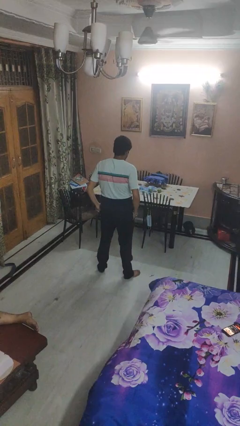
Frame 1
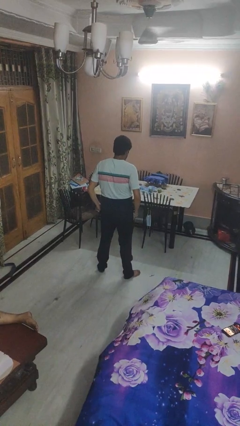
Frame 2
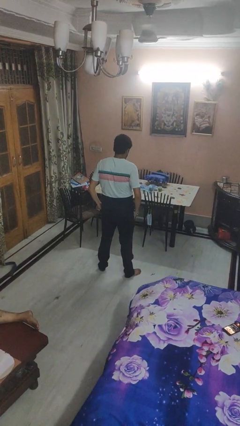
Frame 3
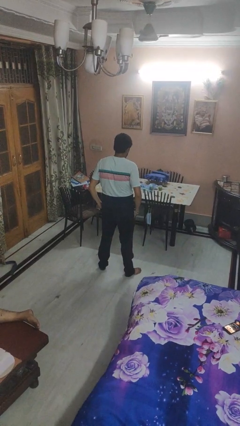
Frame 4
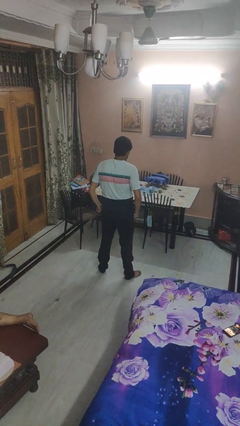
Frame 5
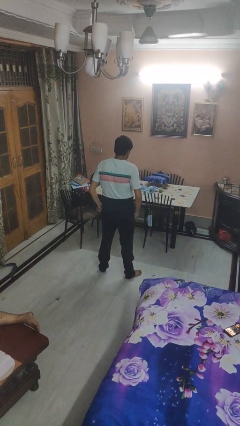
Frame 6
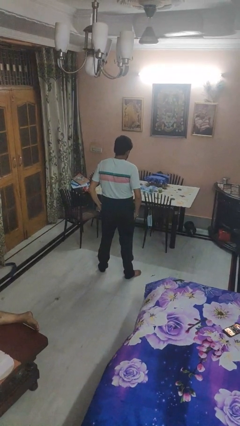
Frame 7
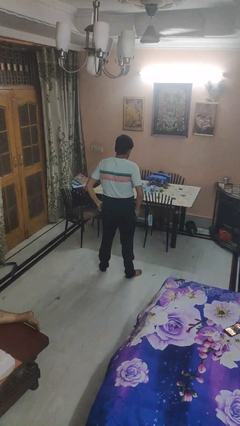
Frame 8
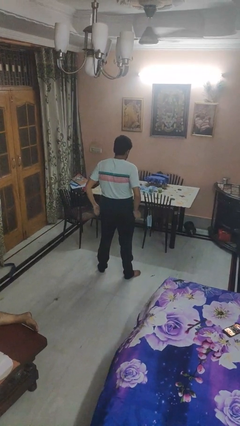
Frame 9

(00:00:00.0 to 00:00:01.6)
person puts hands in back pockets

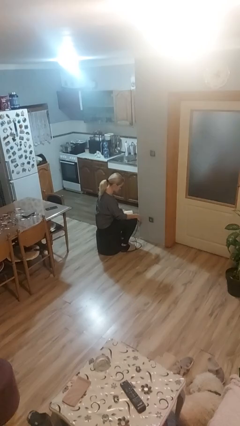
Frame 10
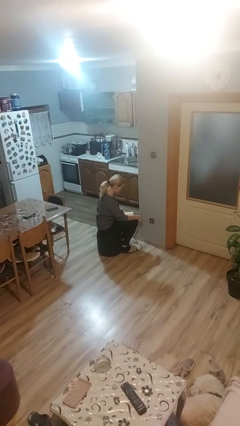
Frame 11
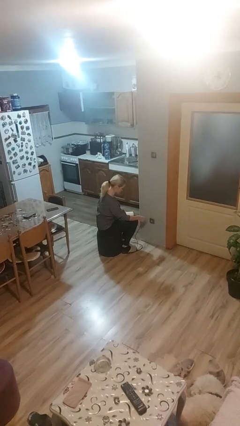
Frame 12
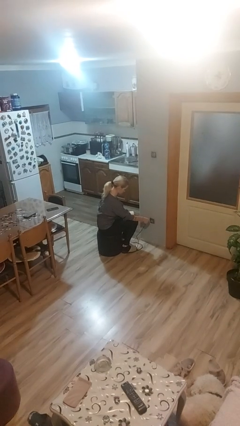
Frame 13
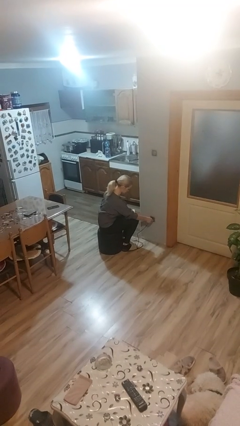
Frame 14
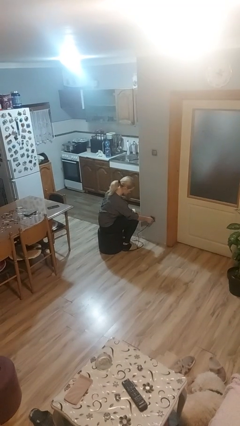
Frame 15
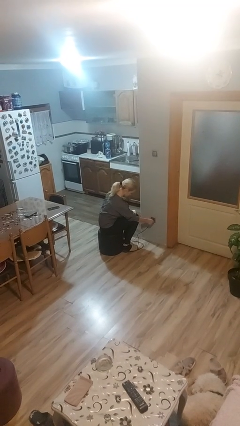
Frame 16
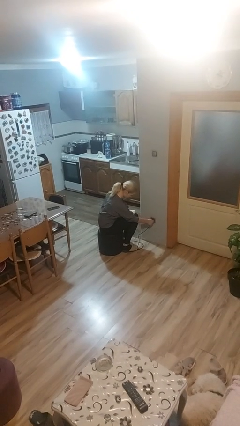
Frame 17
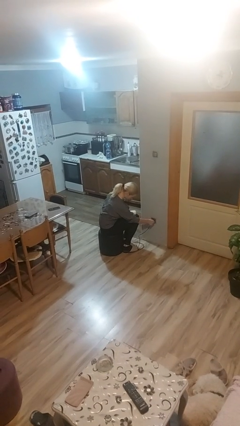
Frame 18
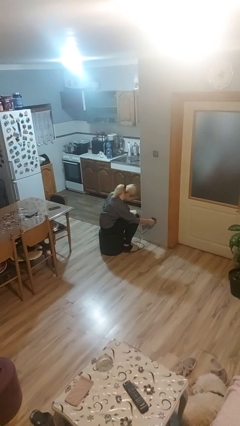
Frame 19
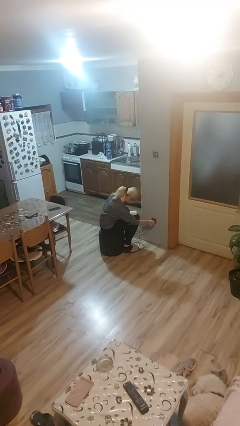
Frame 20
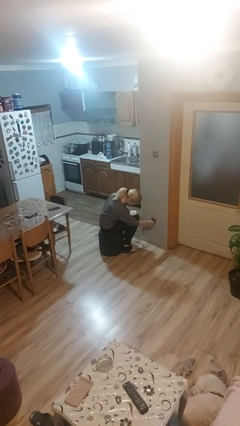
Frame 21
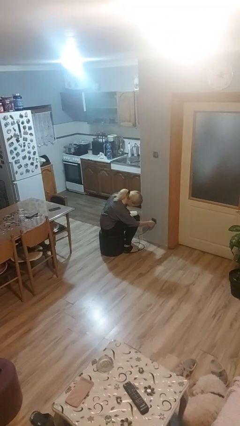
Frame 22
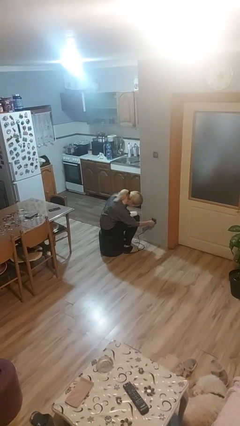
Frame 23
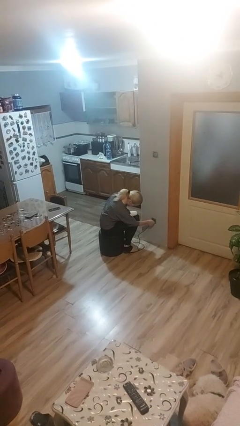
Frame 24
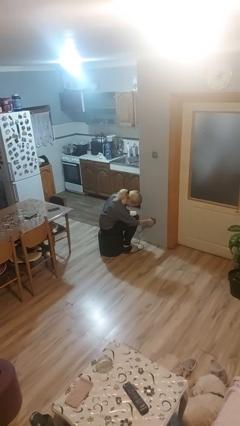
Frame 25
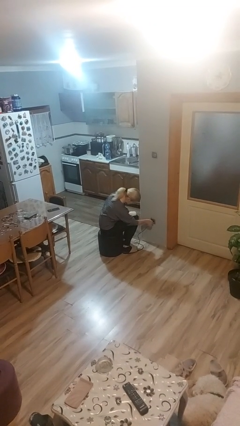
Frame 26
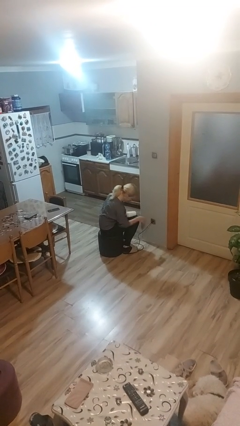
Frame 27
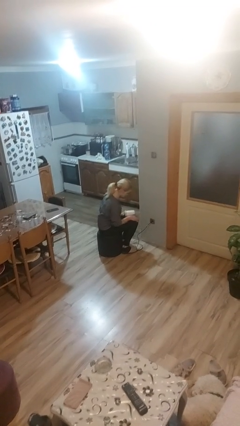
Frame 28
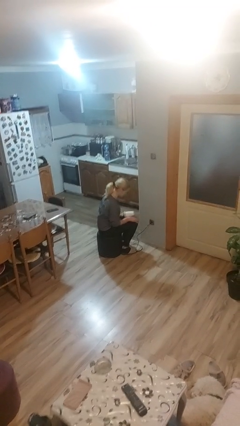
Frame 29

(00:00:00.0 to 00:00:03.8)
person plugs into electrical socket

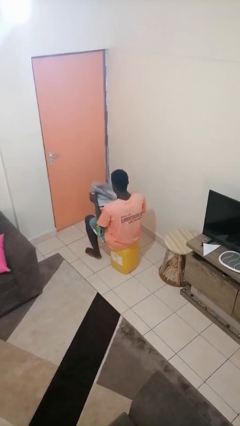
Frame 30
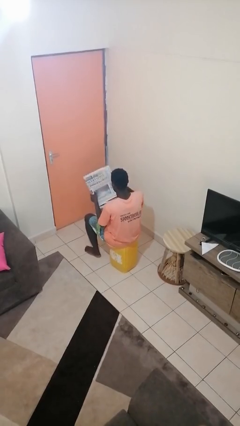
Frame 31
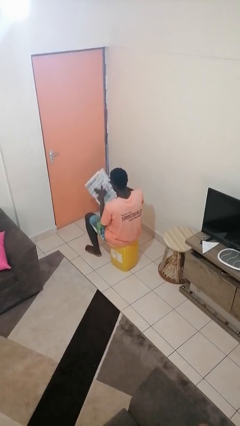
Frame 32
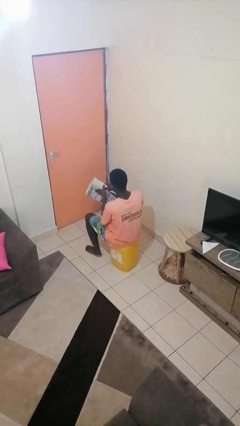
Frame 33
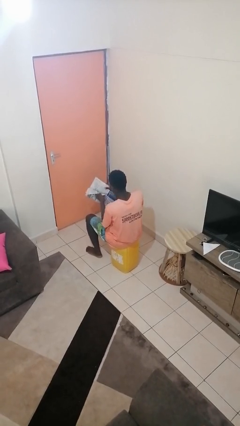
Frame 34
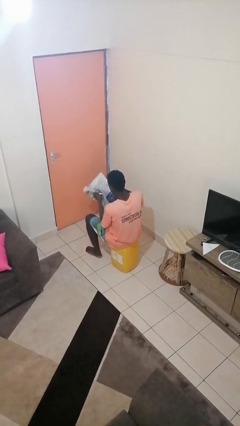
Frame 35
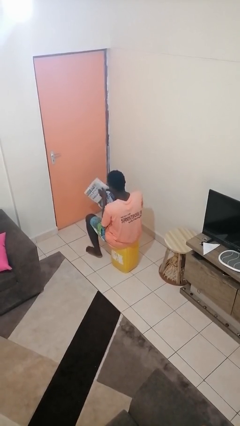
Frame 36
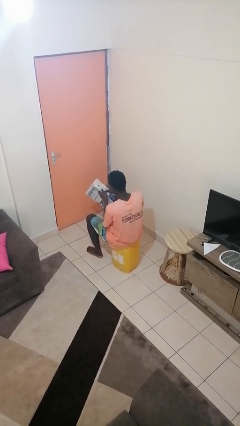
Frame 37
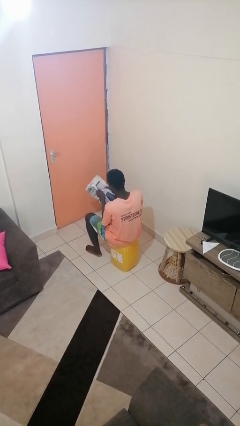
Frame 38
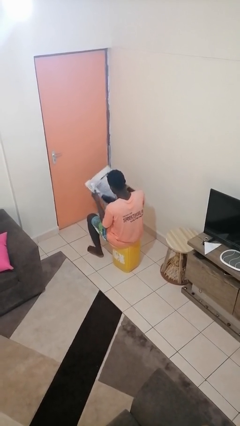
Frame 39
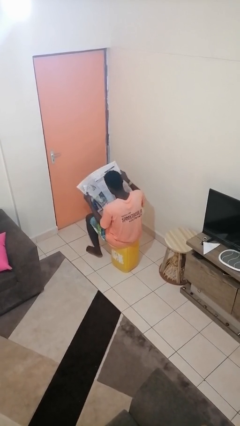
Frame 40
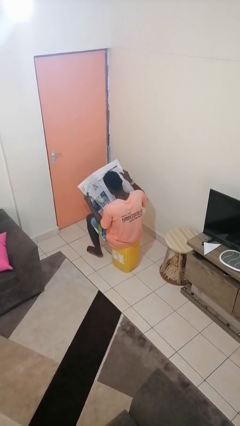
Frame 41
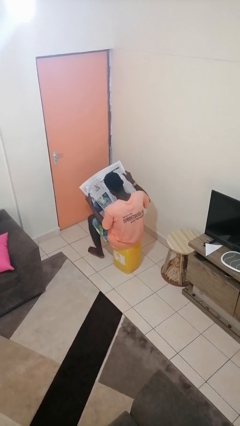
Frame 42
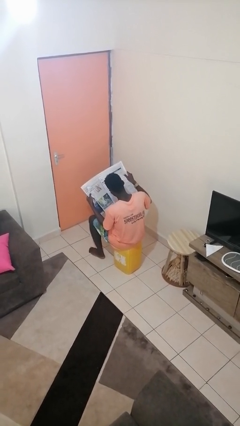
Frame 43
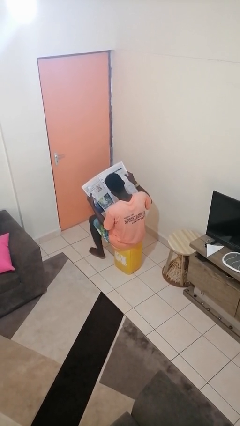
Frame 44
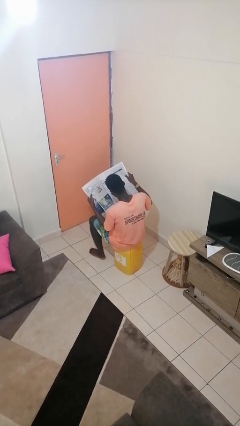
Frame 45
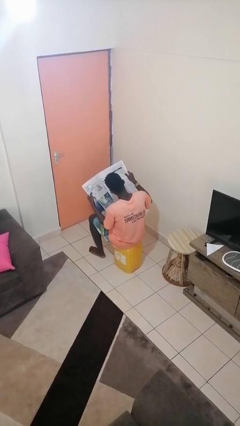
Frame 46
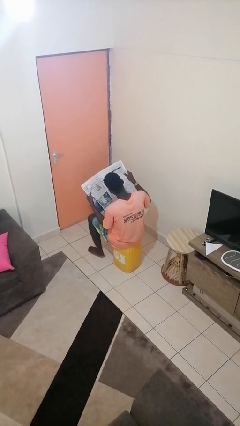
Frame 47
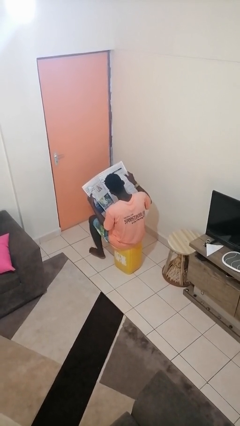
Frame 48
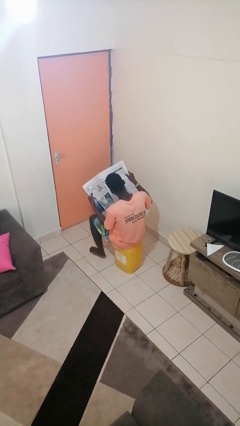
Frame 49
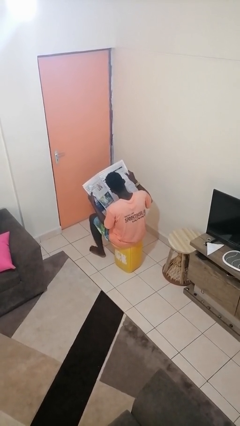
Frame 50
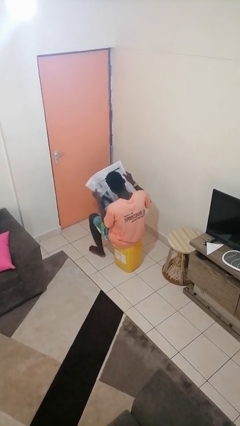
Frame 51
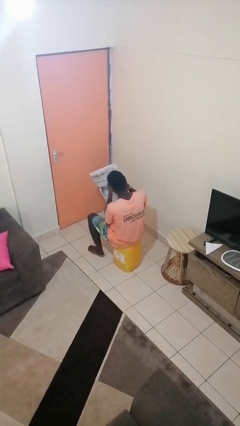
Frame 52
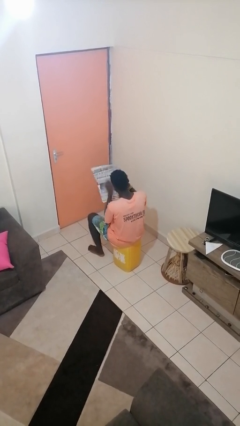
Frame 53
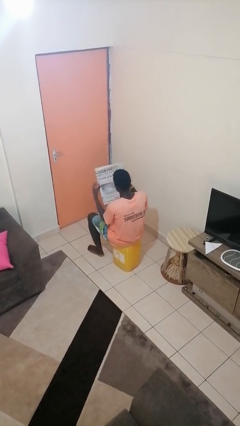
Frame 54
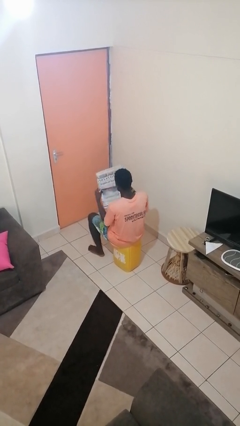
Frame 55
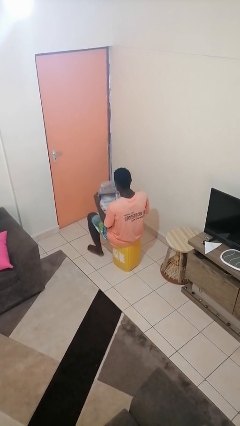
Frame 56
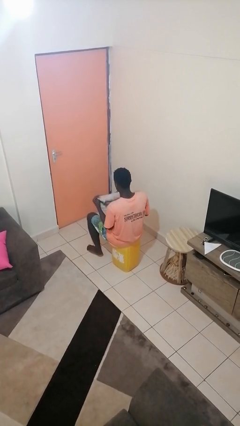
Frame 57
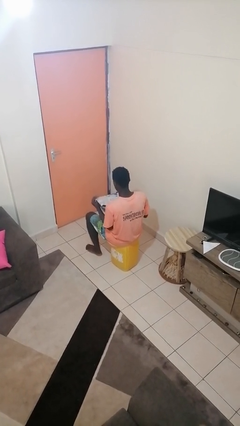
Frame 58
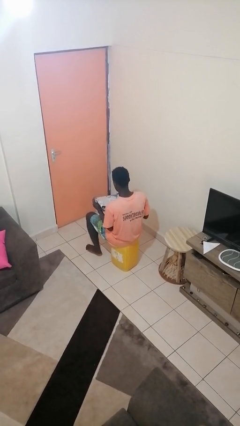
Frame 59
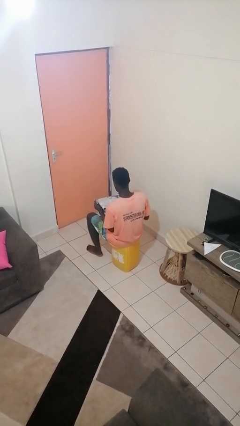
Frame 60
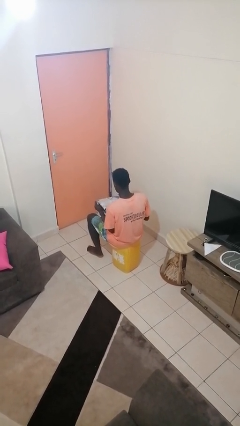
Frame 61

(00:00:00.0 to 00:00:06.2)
person reads newspaper

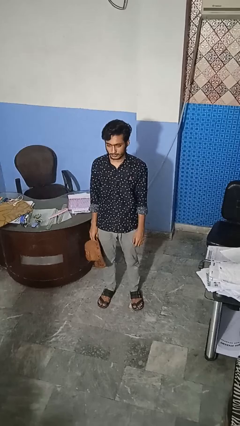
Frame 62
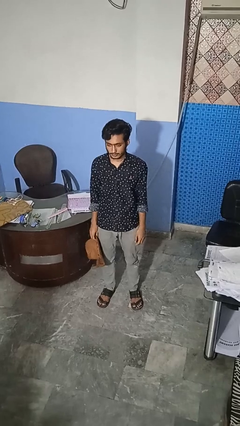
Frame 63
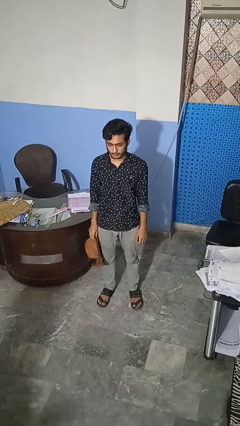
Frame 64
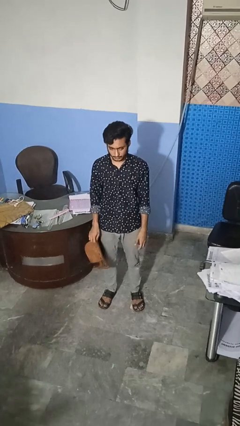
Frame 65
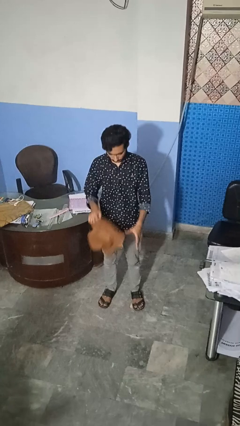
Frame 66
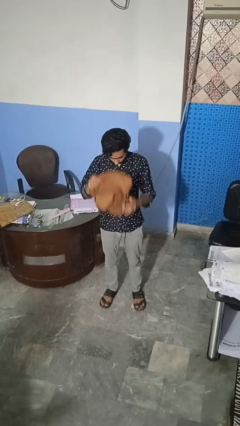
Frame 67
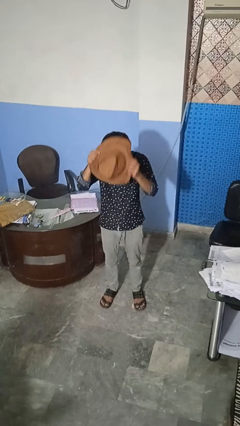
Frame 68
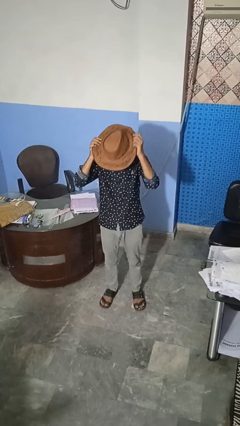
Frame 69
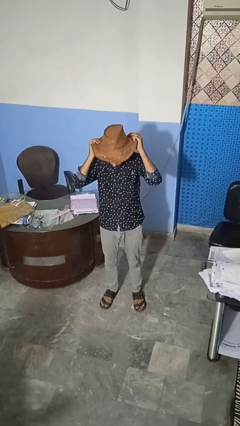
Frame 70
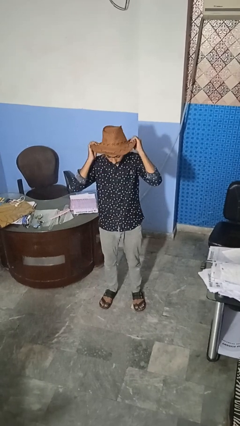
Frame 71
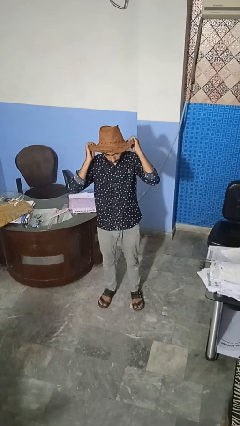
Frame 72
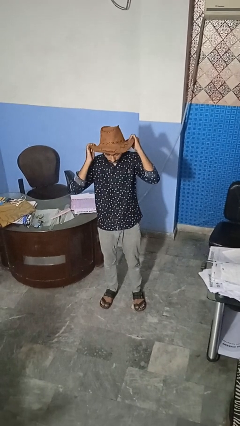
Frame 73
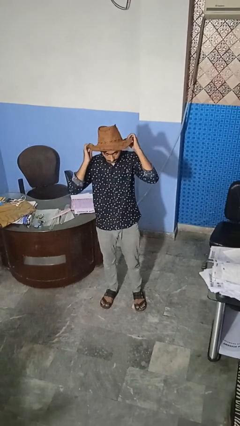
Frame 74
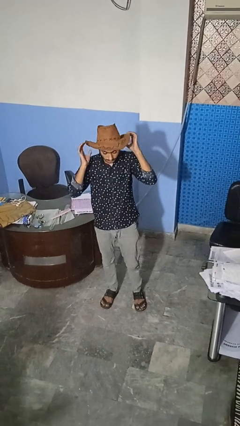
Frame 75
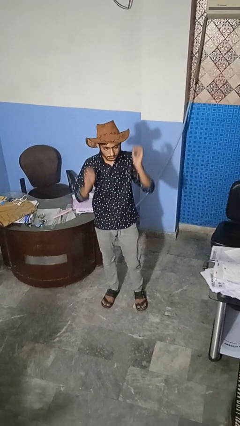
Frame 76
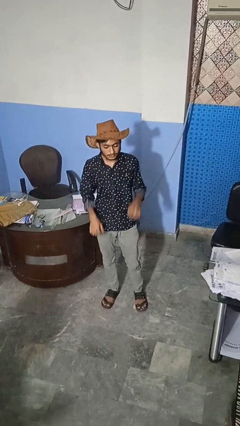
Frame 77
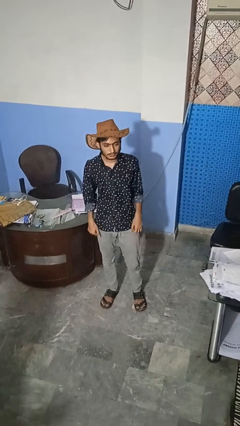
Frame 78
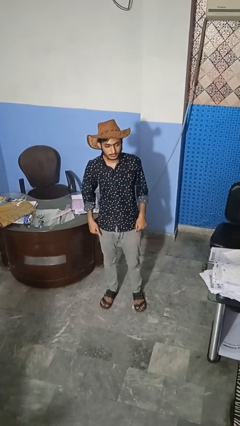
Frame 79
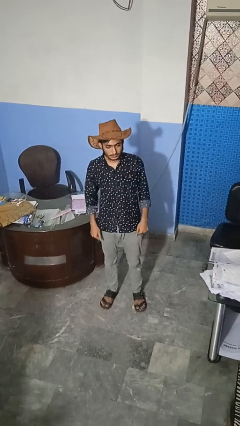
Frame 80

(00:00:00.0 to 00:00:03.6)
person puts on hat

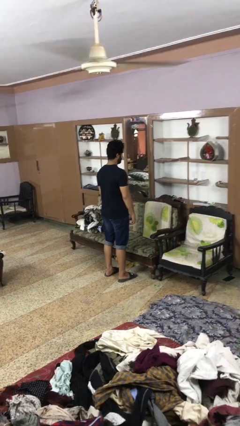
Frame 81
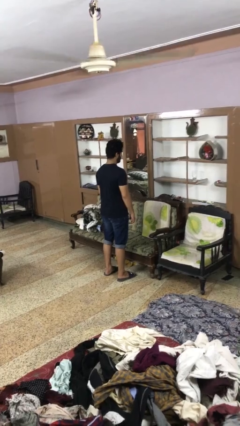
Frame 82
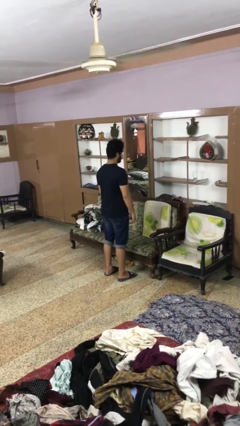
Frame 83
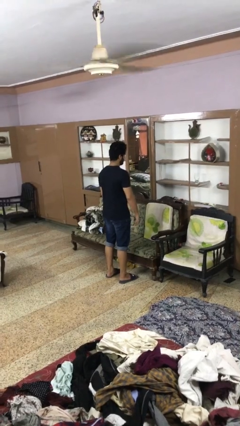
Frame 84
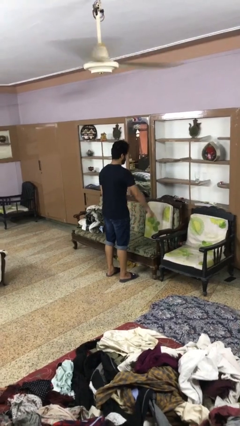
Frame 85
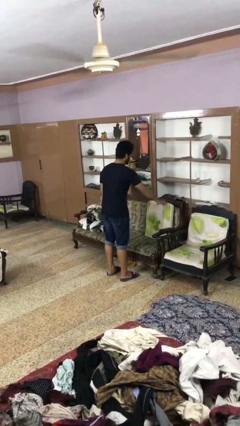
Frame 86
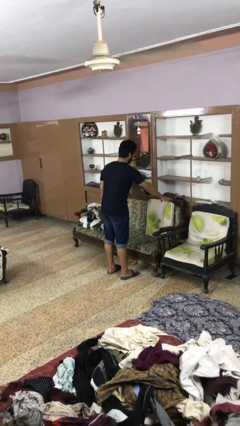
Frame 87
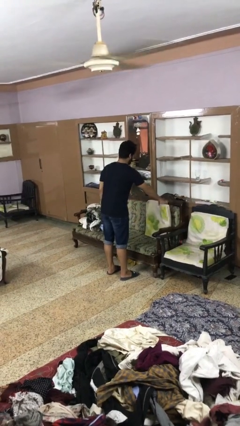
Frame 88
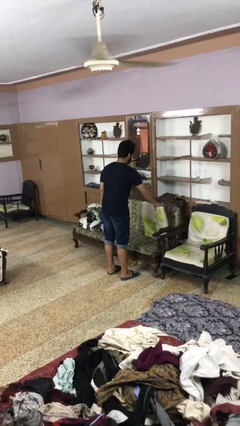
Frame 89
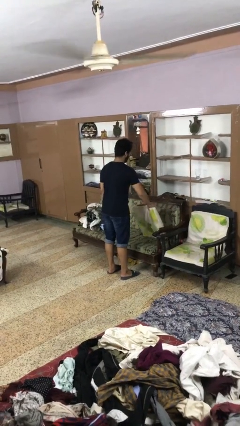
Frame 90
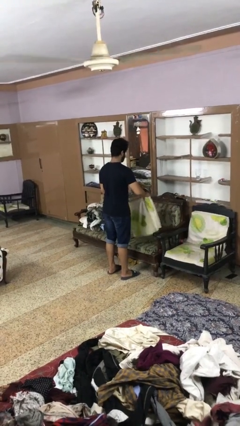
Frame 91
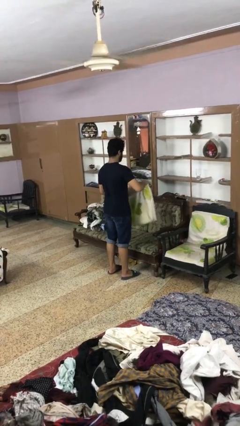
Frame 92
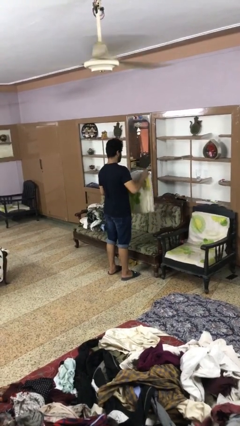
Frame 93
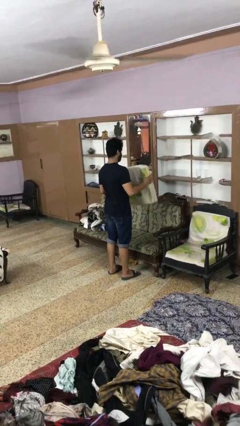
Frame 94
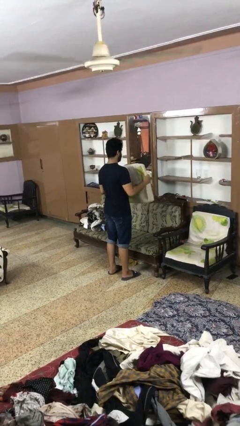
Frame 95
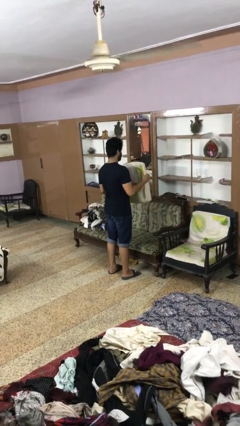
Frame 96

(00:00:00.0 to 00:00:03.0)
person picks up object from couch
